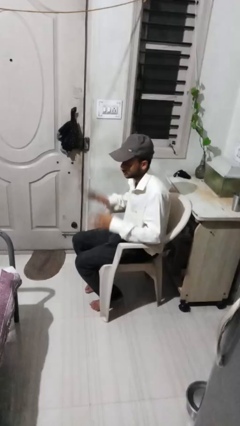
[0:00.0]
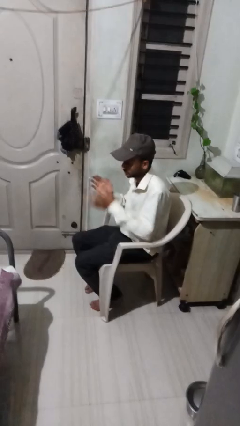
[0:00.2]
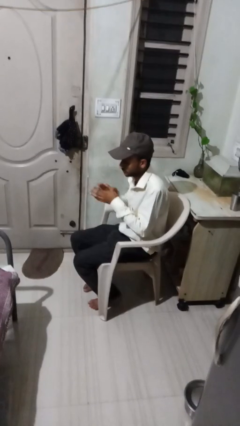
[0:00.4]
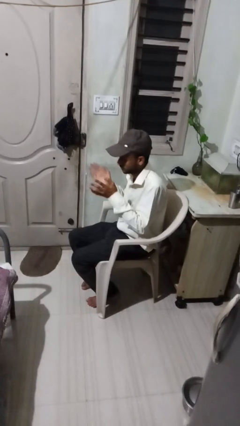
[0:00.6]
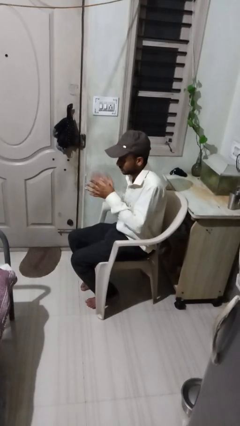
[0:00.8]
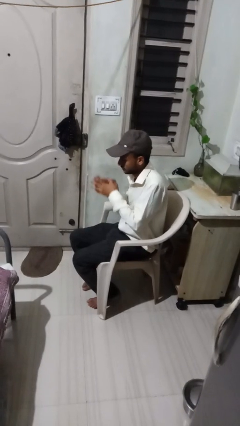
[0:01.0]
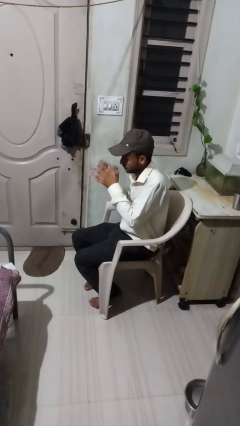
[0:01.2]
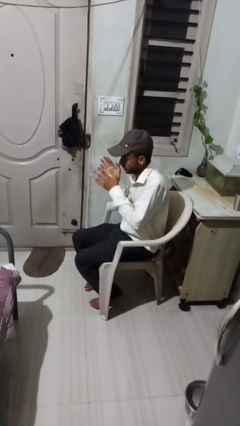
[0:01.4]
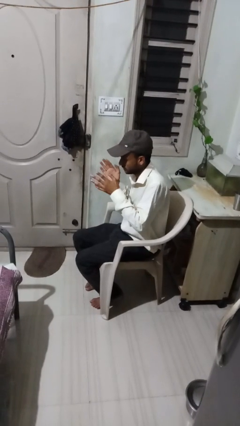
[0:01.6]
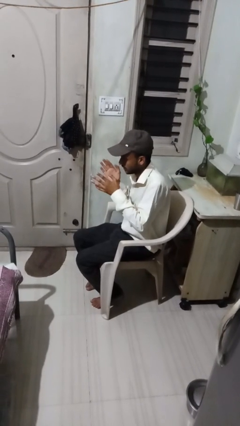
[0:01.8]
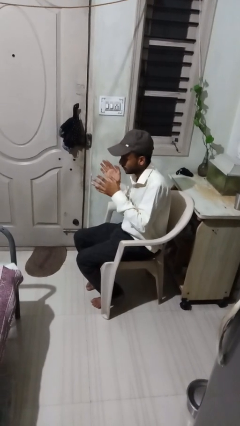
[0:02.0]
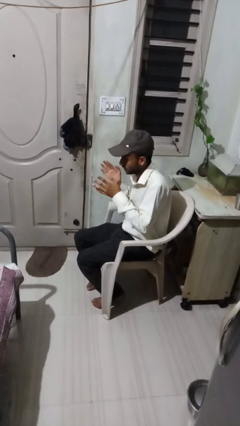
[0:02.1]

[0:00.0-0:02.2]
person claps hands

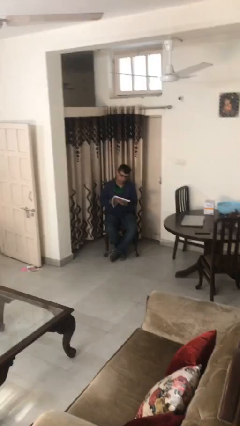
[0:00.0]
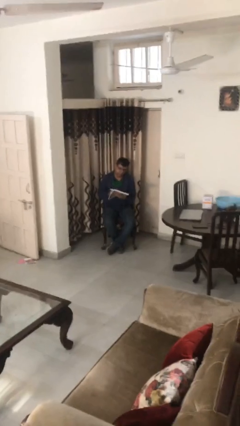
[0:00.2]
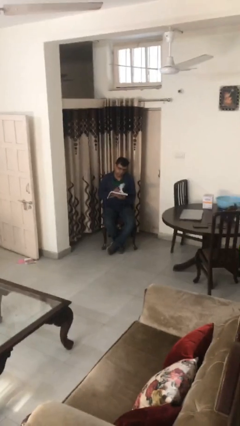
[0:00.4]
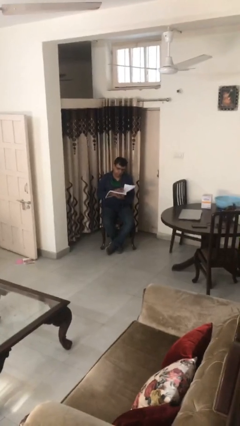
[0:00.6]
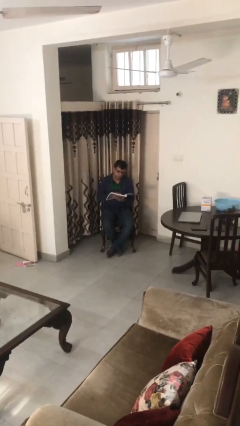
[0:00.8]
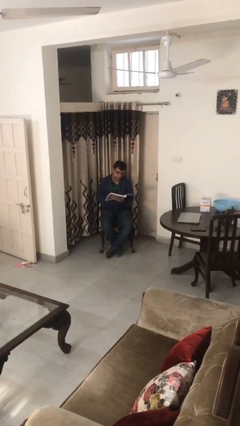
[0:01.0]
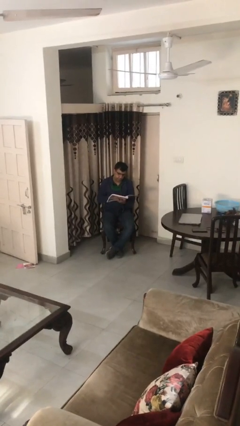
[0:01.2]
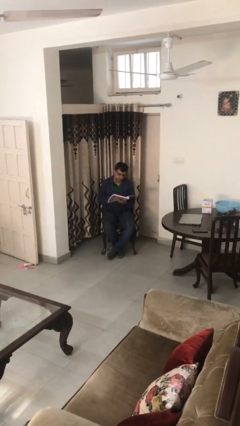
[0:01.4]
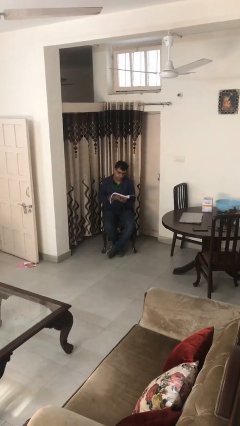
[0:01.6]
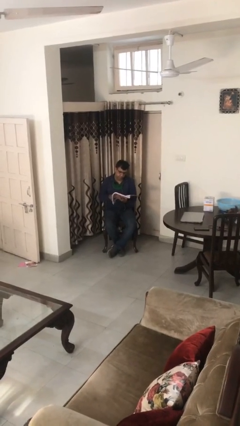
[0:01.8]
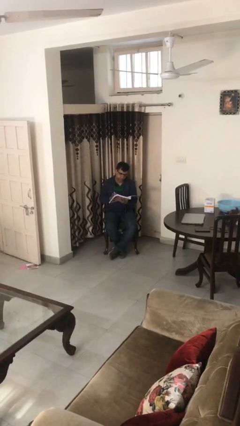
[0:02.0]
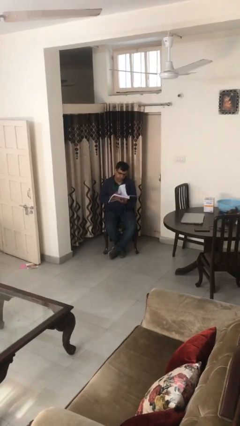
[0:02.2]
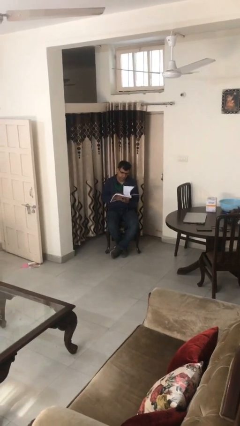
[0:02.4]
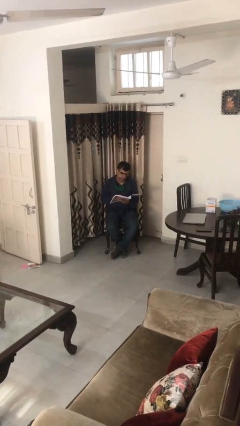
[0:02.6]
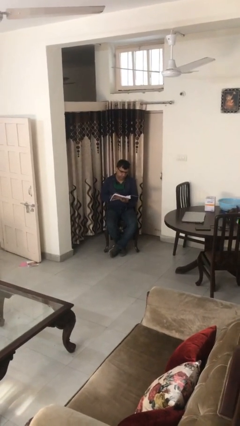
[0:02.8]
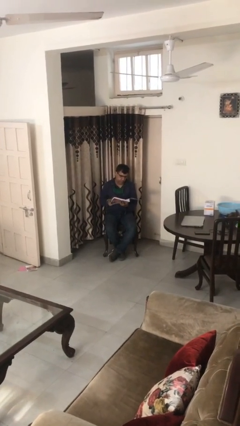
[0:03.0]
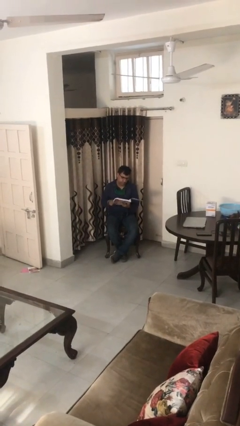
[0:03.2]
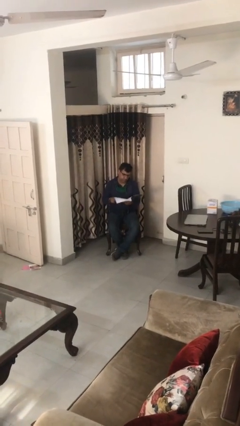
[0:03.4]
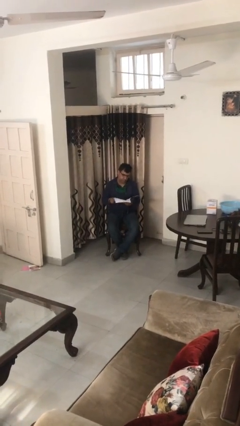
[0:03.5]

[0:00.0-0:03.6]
person reads document

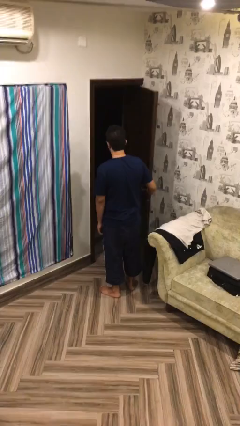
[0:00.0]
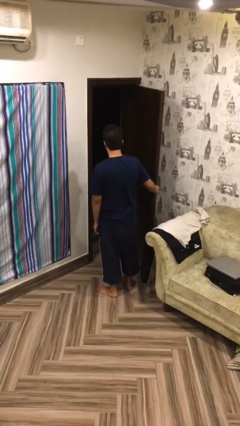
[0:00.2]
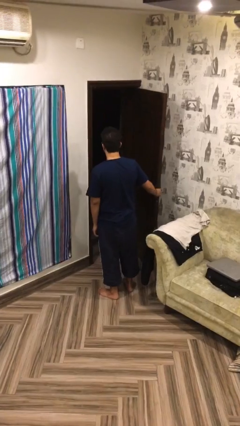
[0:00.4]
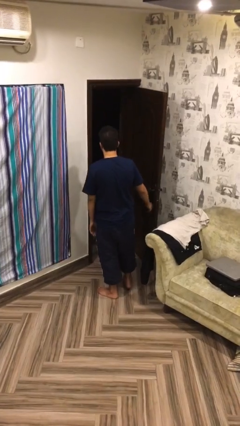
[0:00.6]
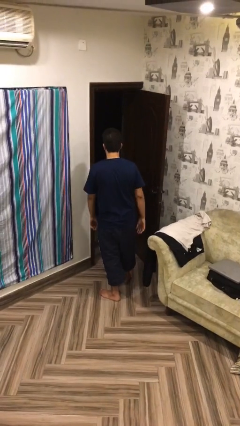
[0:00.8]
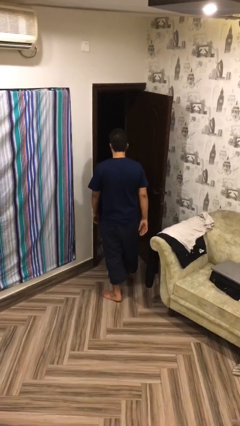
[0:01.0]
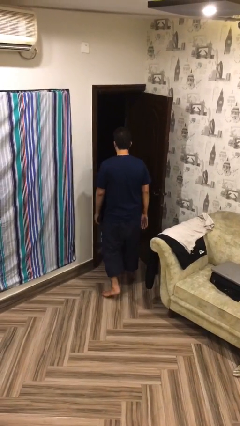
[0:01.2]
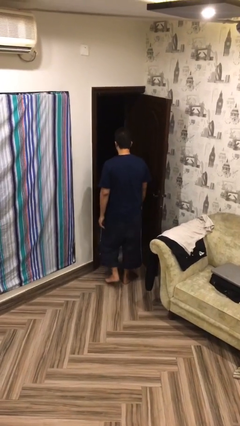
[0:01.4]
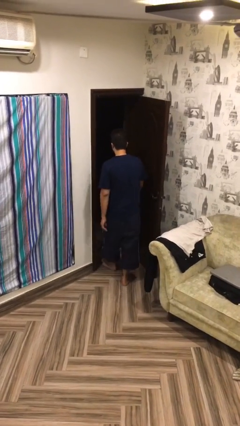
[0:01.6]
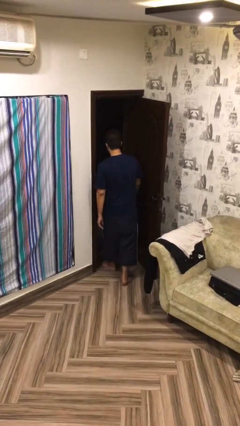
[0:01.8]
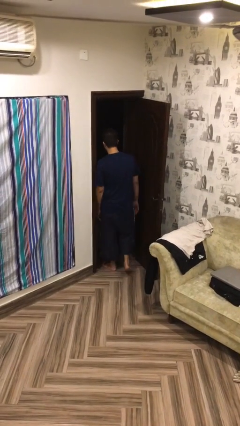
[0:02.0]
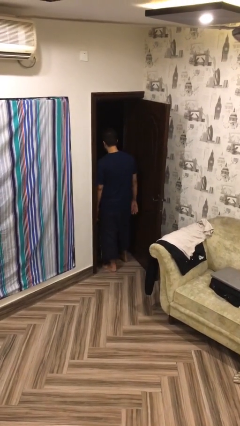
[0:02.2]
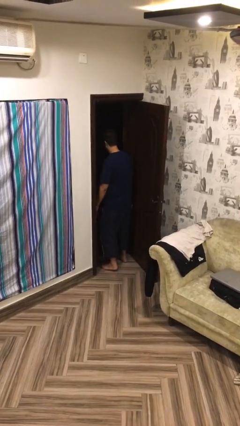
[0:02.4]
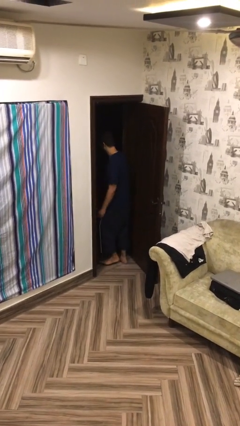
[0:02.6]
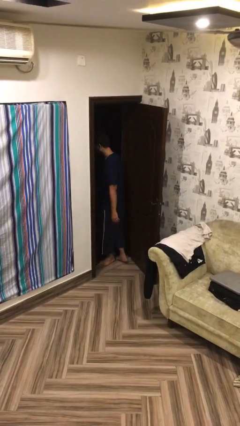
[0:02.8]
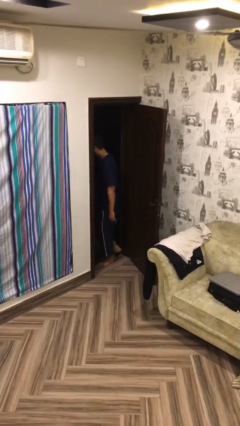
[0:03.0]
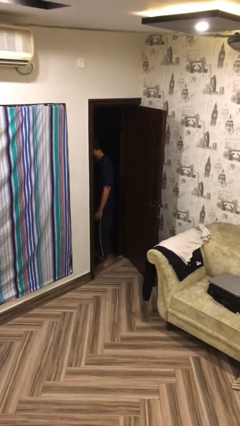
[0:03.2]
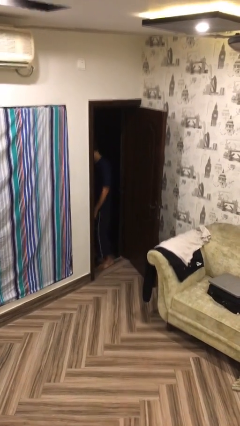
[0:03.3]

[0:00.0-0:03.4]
person exits scene through structure

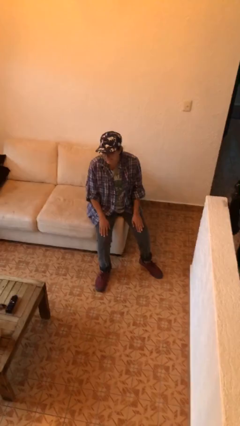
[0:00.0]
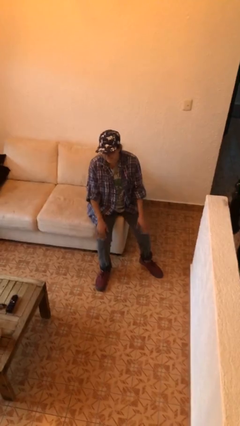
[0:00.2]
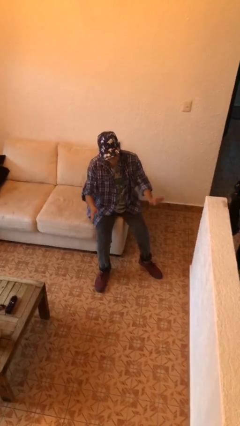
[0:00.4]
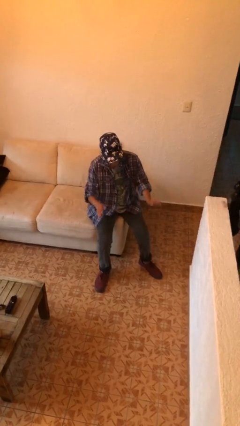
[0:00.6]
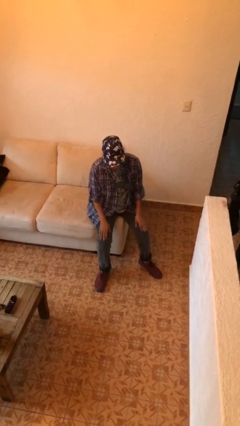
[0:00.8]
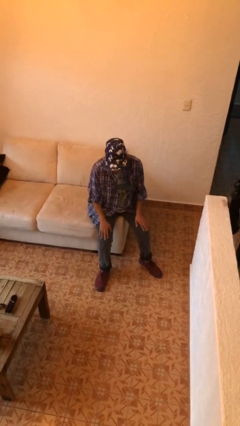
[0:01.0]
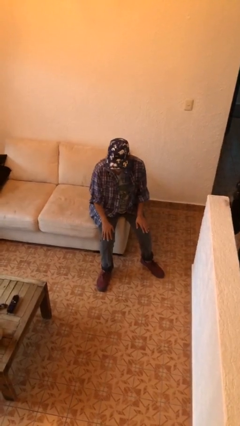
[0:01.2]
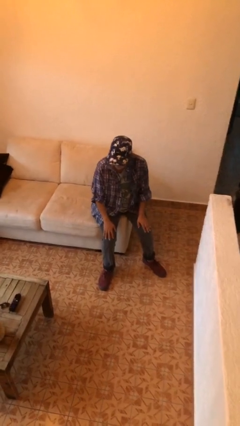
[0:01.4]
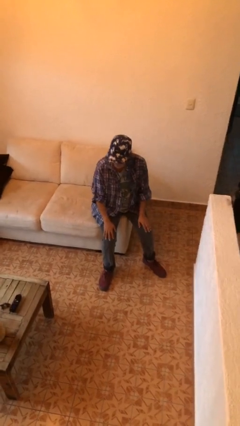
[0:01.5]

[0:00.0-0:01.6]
person slaps hands on thighs

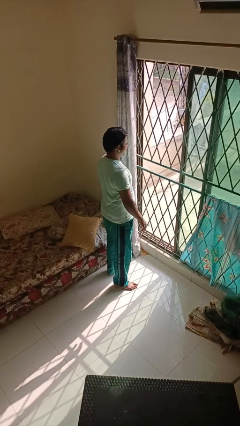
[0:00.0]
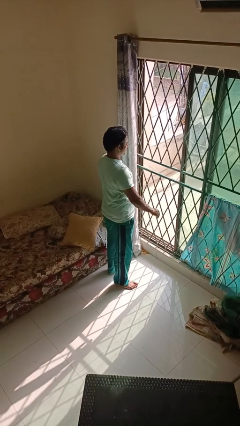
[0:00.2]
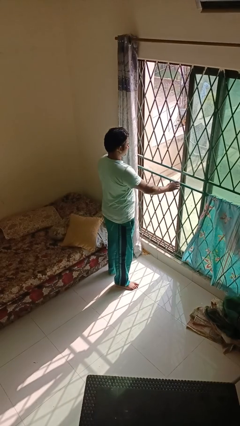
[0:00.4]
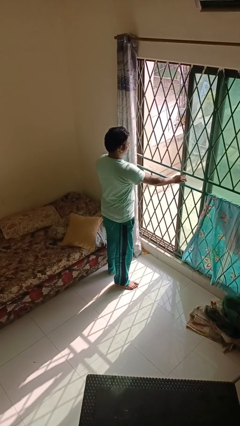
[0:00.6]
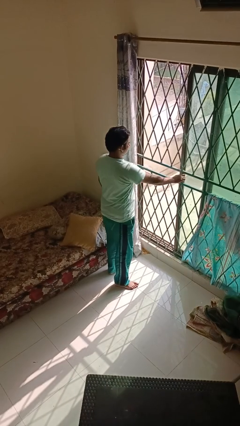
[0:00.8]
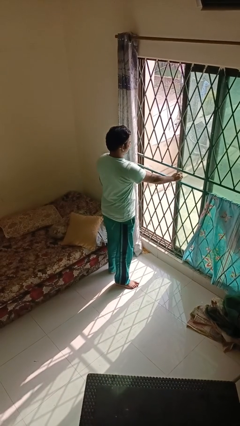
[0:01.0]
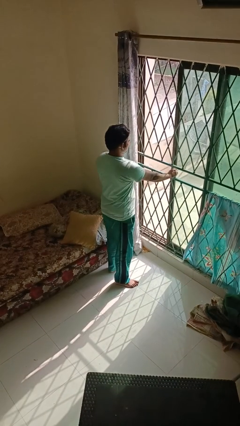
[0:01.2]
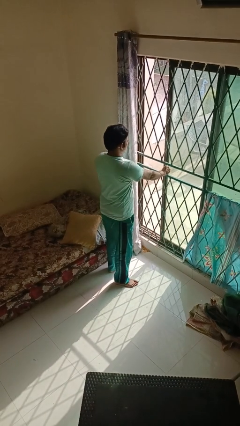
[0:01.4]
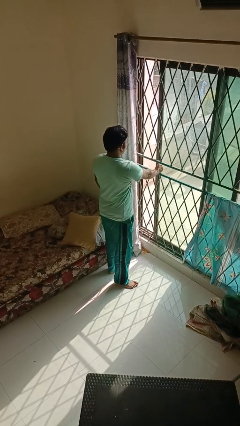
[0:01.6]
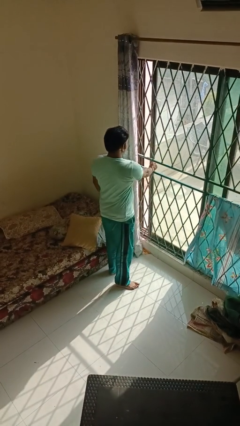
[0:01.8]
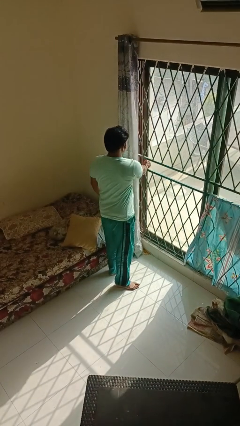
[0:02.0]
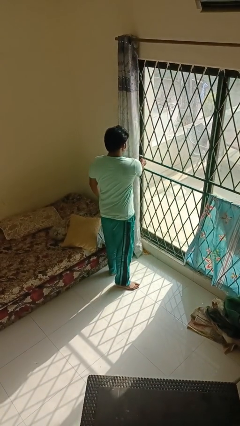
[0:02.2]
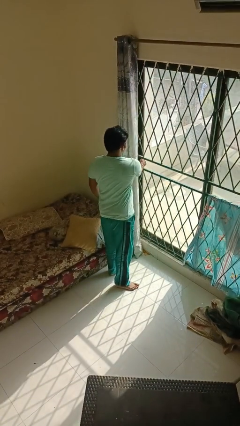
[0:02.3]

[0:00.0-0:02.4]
person closes home window

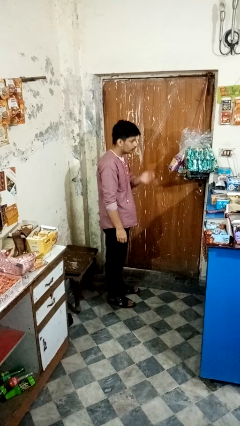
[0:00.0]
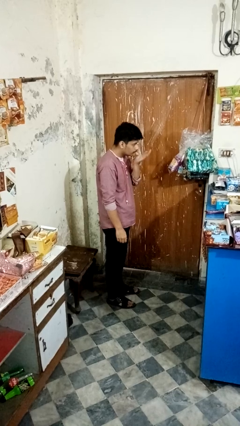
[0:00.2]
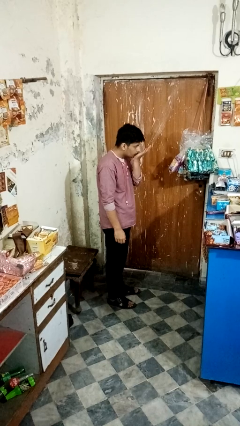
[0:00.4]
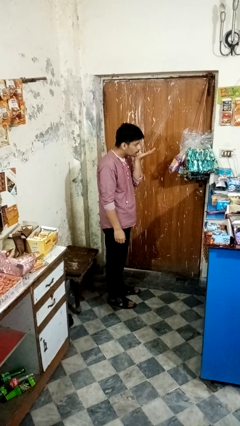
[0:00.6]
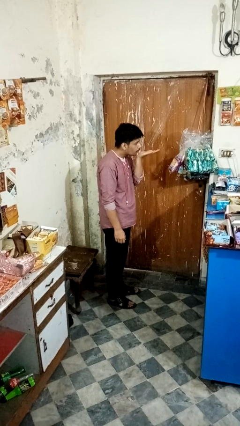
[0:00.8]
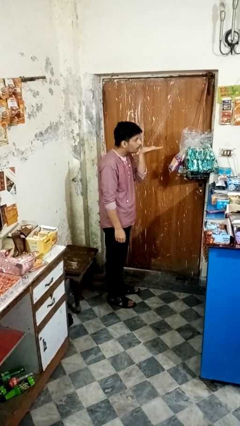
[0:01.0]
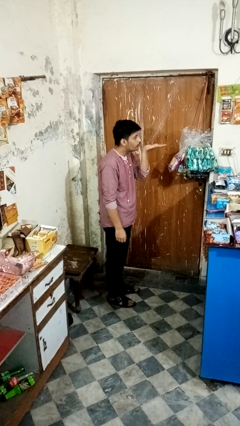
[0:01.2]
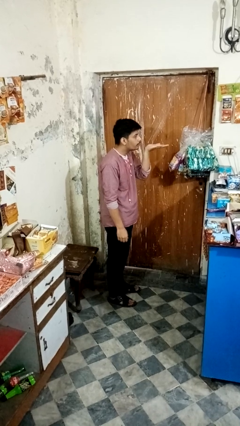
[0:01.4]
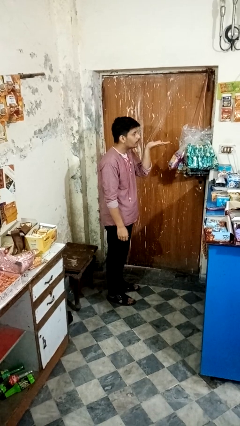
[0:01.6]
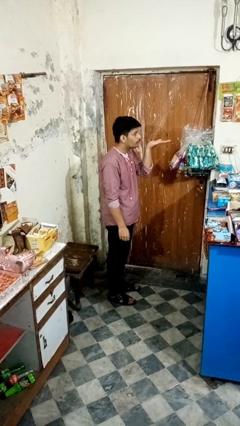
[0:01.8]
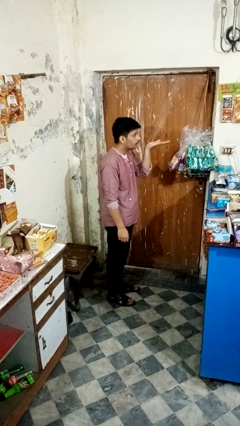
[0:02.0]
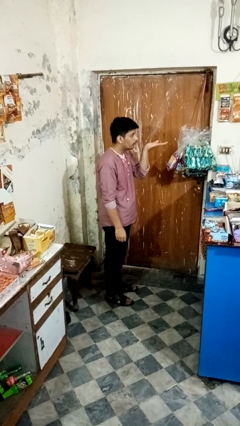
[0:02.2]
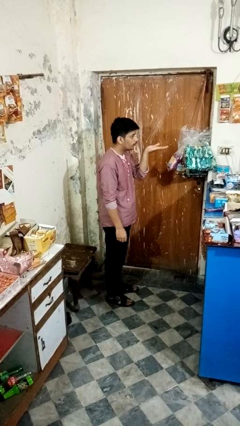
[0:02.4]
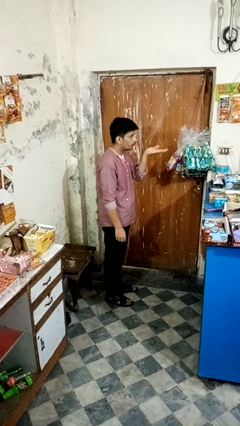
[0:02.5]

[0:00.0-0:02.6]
person gestures blow kiss

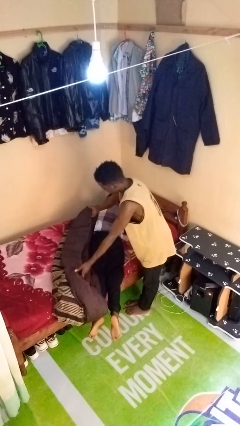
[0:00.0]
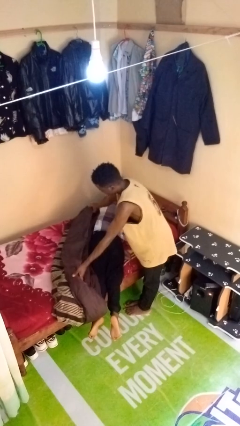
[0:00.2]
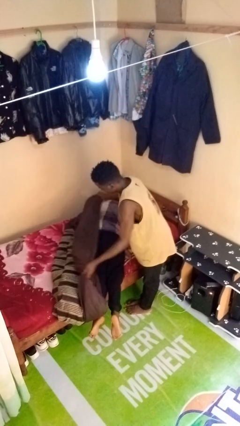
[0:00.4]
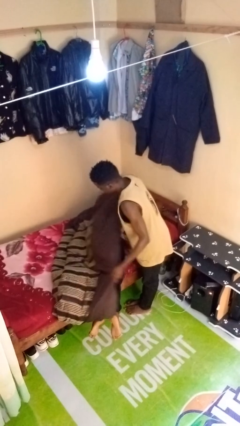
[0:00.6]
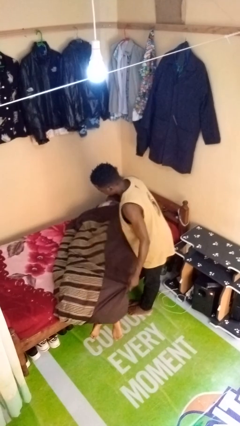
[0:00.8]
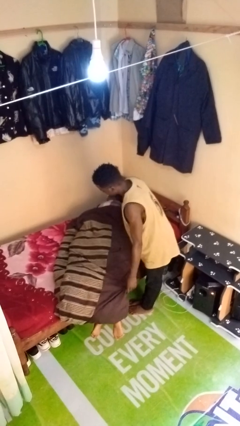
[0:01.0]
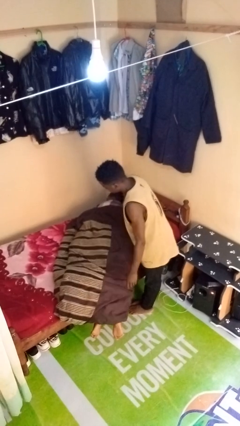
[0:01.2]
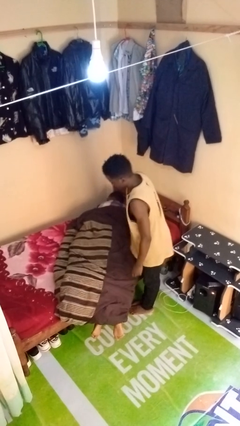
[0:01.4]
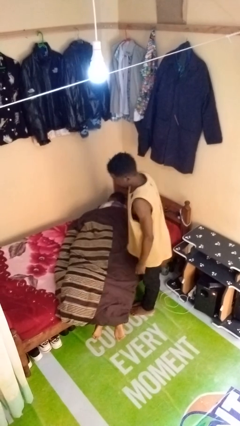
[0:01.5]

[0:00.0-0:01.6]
person covers friend with blanket
